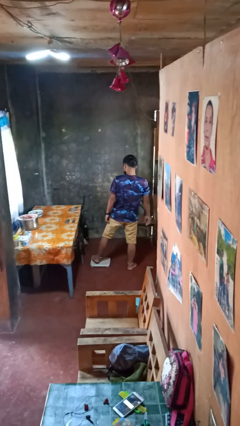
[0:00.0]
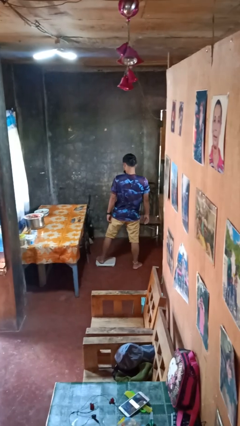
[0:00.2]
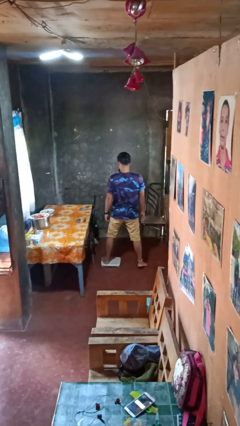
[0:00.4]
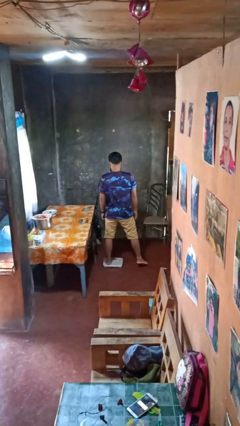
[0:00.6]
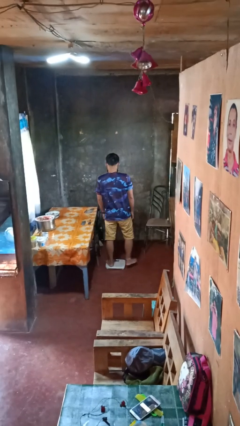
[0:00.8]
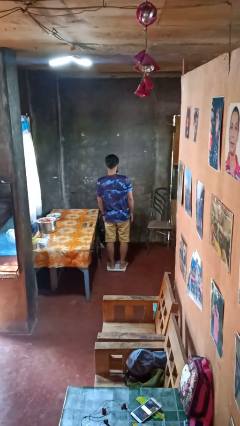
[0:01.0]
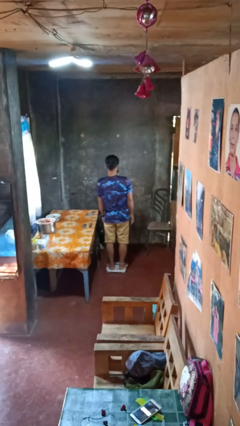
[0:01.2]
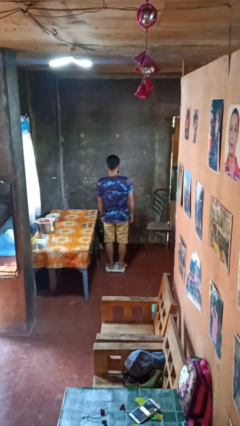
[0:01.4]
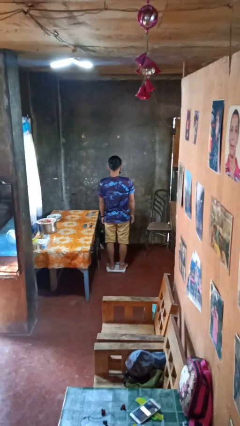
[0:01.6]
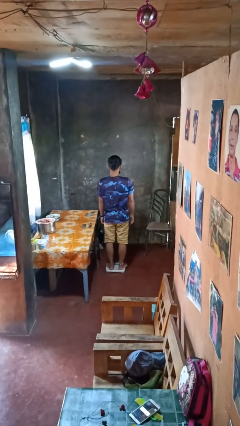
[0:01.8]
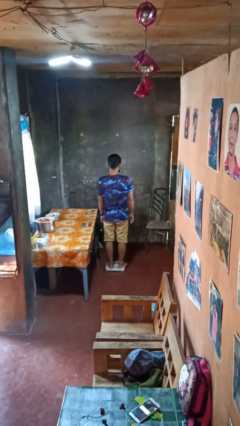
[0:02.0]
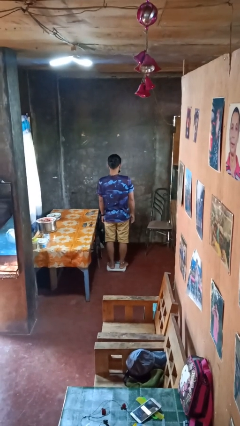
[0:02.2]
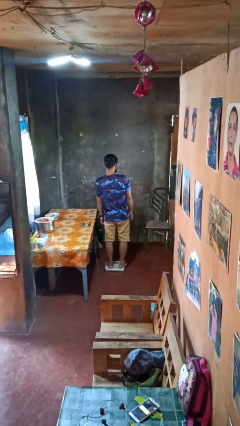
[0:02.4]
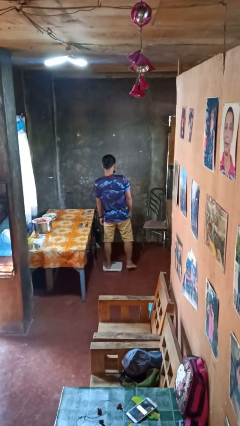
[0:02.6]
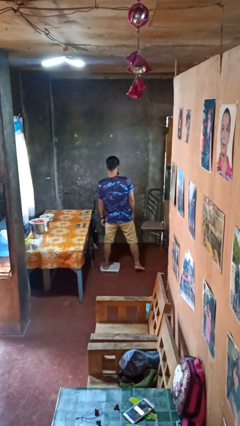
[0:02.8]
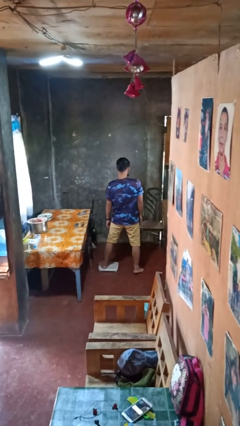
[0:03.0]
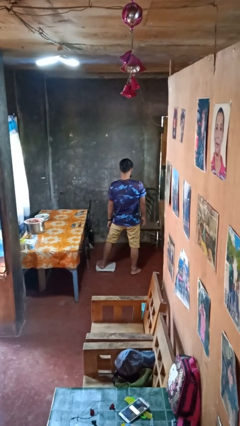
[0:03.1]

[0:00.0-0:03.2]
person uses bodyweight scale

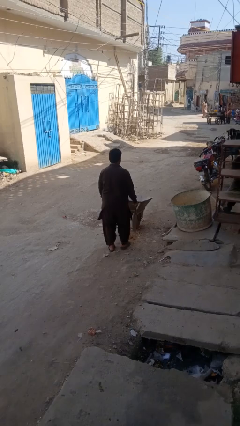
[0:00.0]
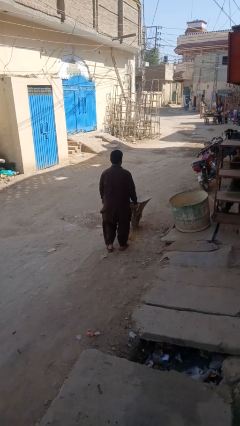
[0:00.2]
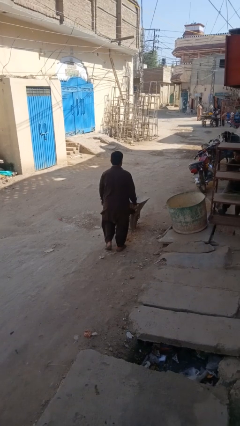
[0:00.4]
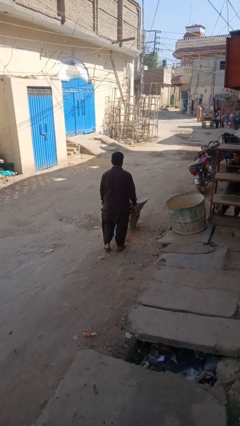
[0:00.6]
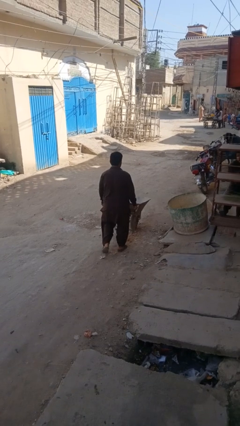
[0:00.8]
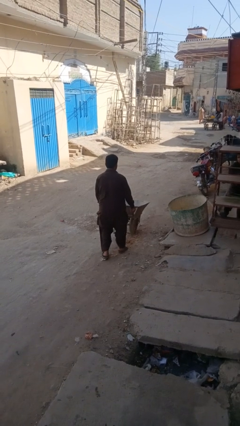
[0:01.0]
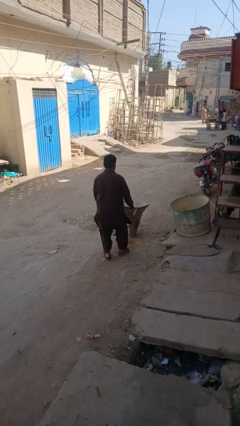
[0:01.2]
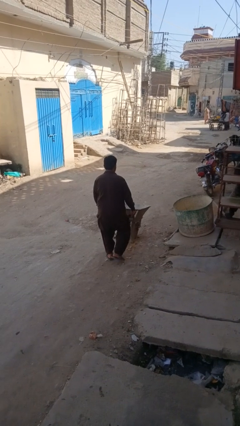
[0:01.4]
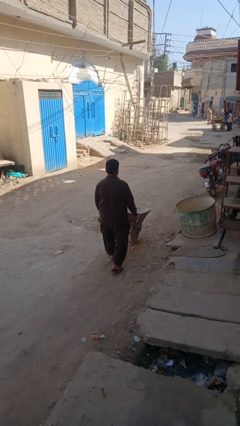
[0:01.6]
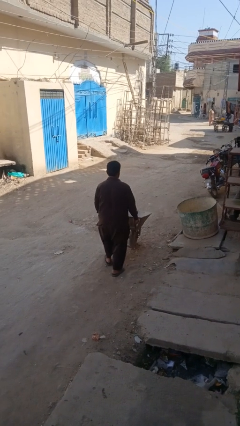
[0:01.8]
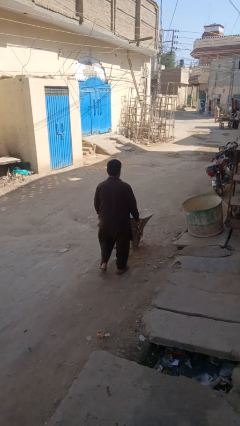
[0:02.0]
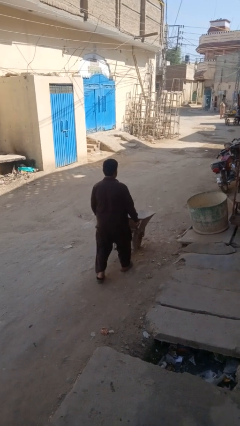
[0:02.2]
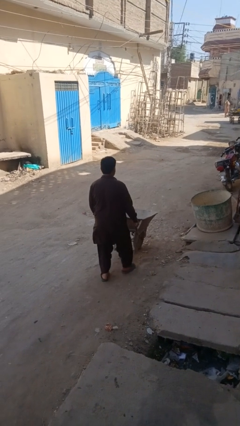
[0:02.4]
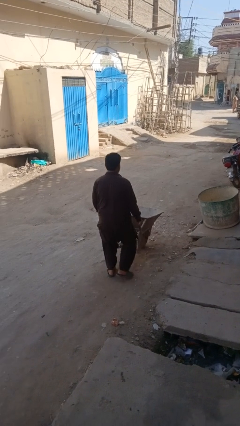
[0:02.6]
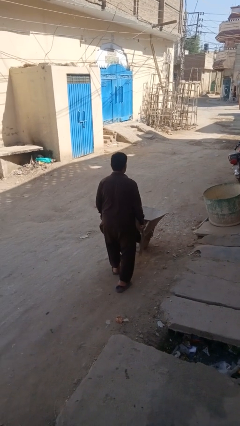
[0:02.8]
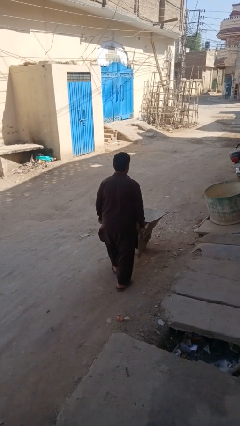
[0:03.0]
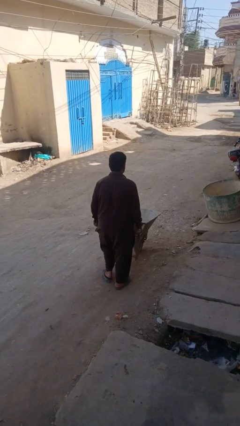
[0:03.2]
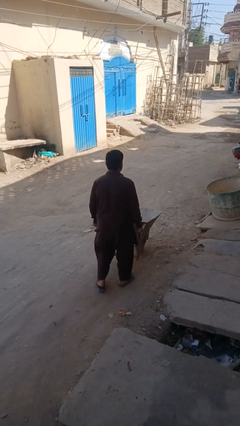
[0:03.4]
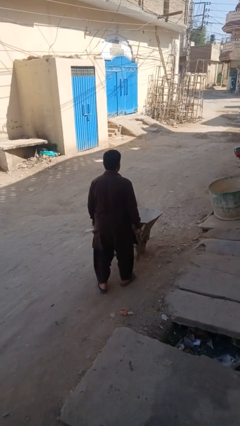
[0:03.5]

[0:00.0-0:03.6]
person pulls wheeled trashcan

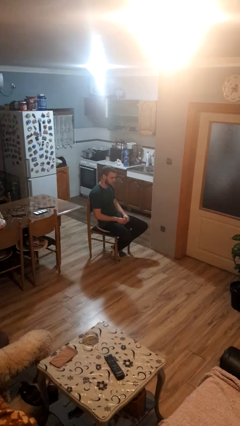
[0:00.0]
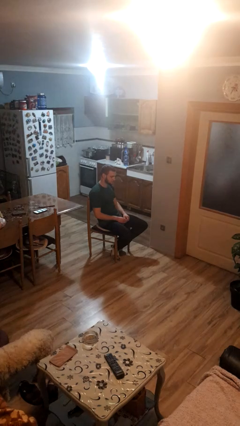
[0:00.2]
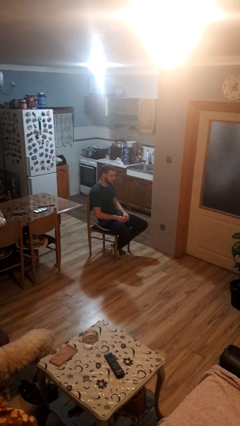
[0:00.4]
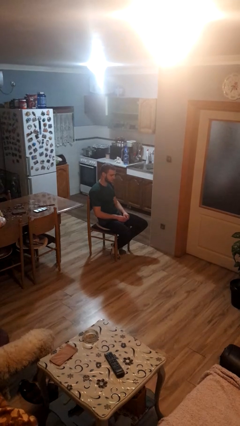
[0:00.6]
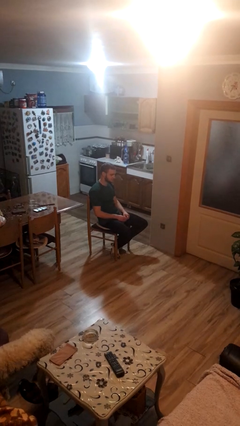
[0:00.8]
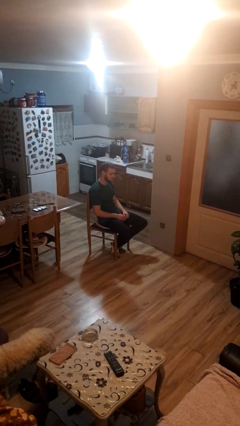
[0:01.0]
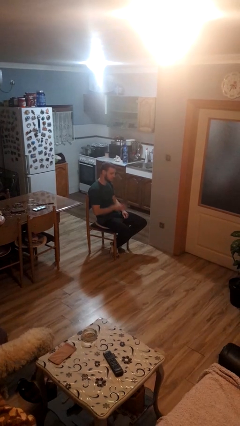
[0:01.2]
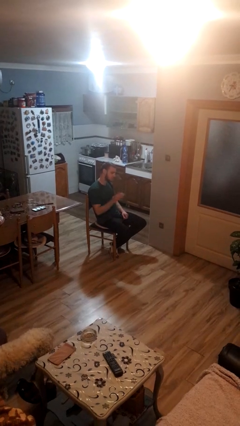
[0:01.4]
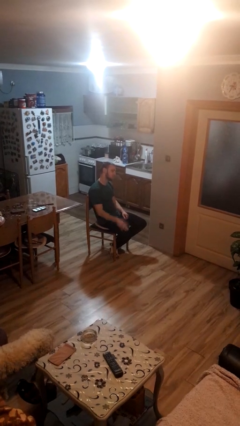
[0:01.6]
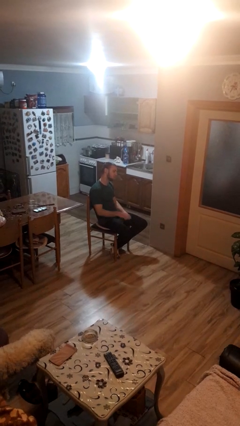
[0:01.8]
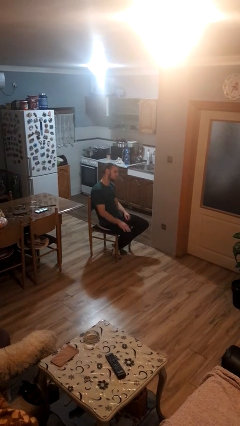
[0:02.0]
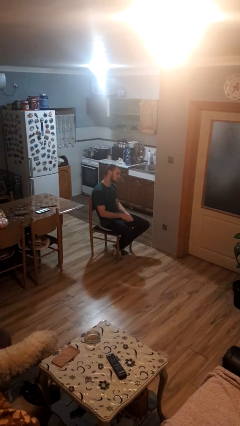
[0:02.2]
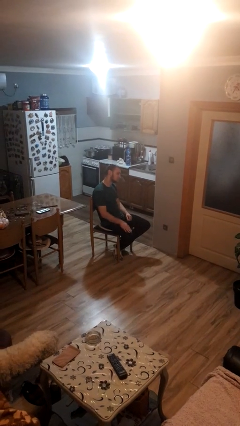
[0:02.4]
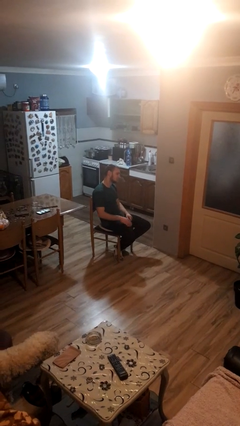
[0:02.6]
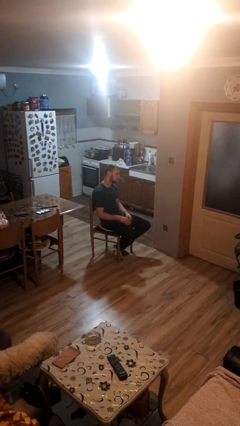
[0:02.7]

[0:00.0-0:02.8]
person slaps hands on thighs

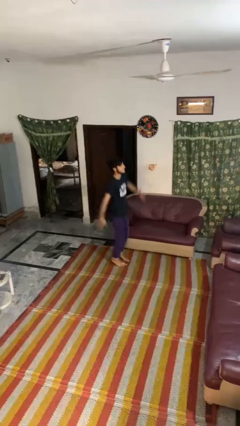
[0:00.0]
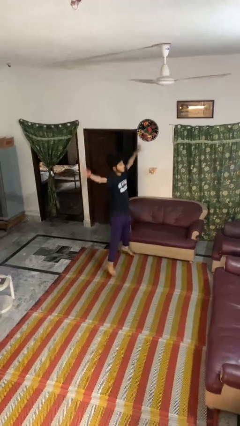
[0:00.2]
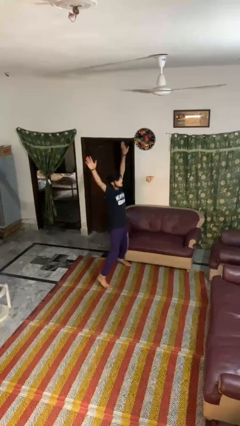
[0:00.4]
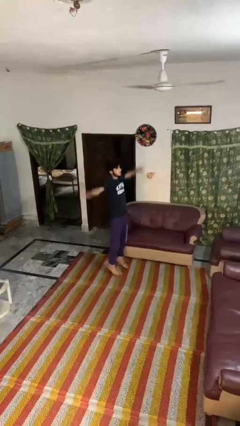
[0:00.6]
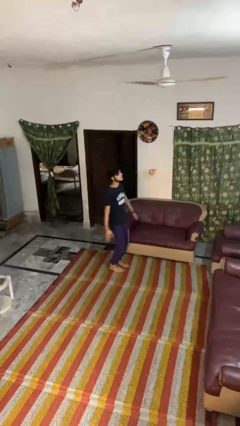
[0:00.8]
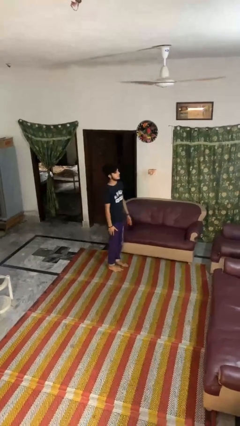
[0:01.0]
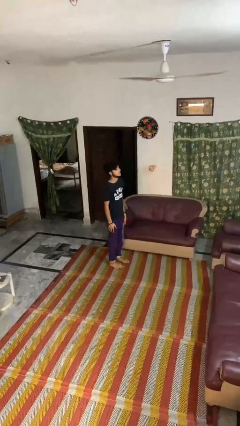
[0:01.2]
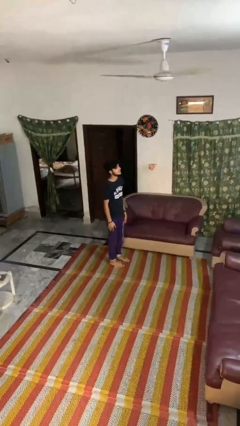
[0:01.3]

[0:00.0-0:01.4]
person exercises with jumping jacks

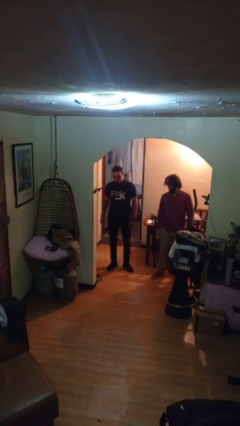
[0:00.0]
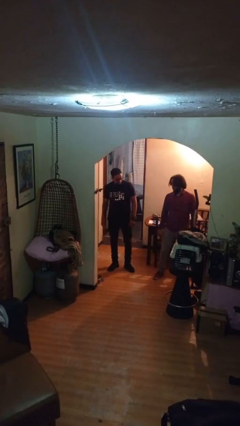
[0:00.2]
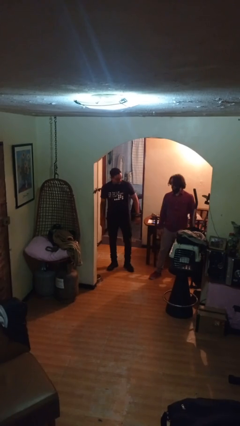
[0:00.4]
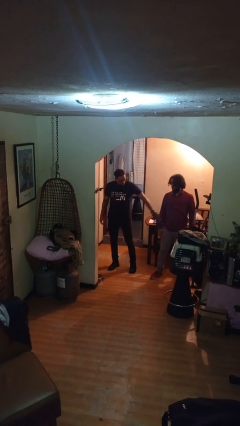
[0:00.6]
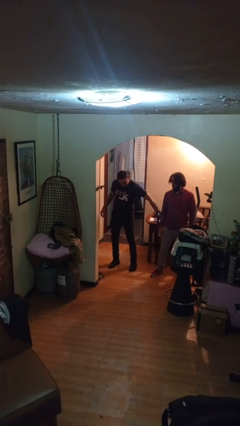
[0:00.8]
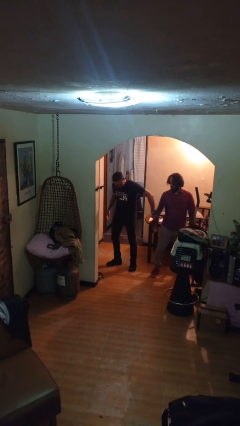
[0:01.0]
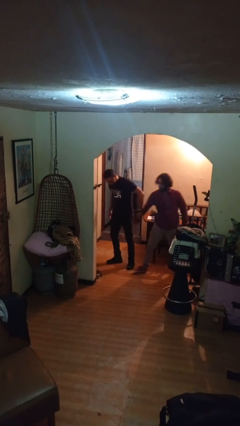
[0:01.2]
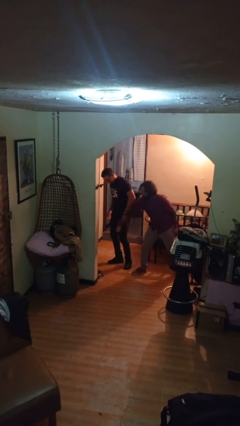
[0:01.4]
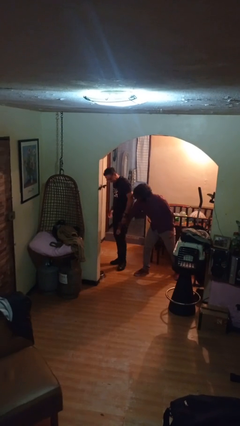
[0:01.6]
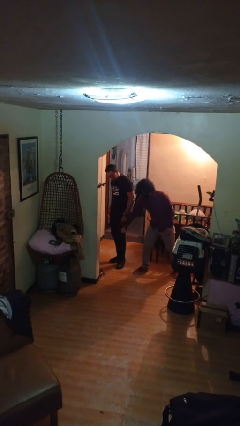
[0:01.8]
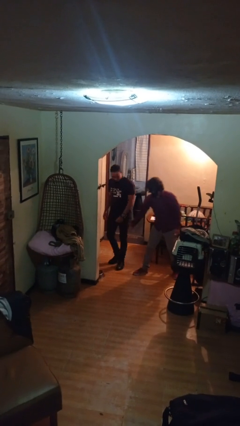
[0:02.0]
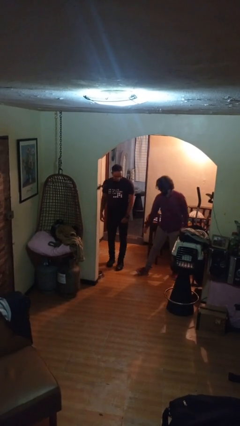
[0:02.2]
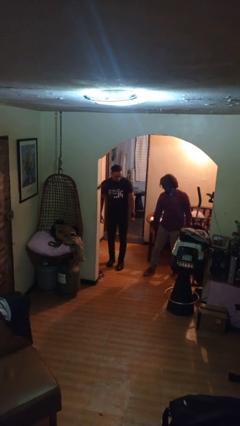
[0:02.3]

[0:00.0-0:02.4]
person grabs person by forearm

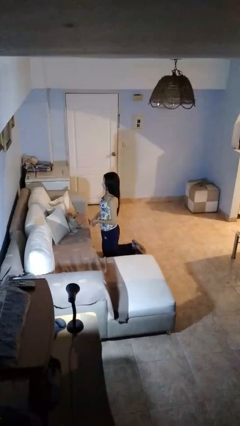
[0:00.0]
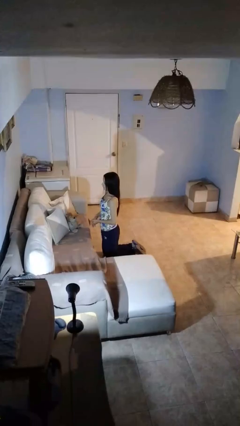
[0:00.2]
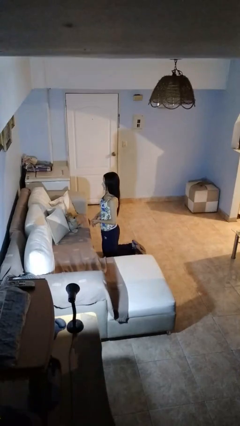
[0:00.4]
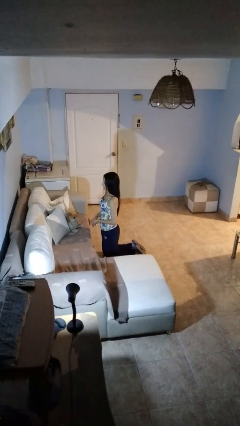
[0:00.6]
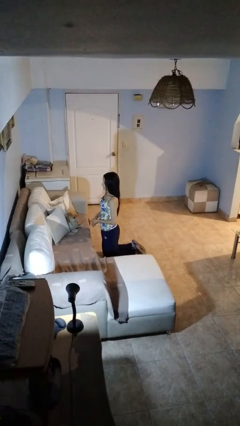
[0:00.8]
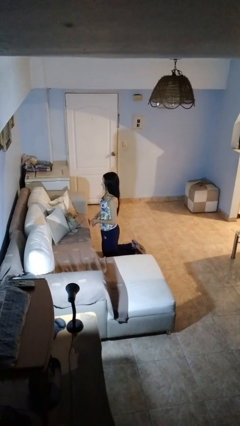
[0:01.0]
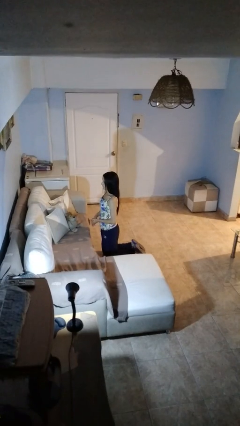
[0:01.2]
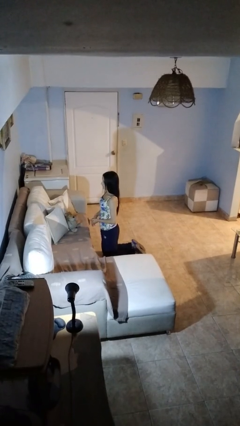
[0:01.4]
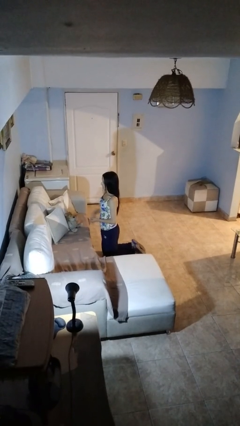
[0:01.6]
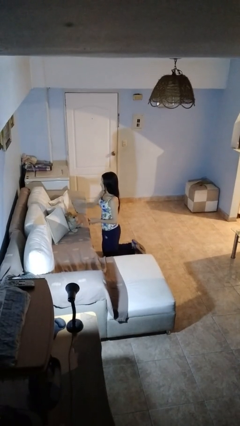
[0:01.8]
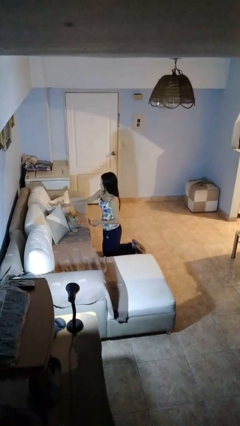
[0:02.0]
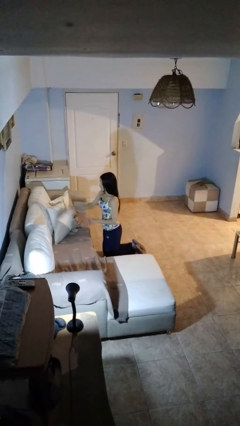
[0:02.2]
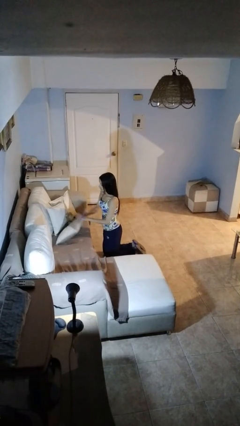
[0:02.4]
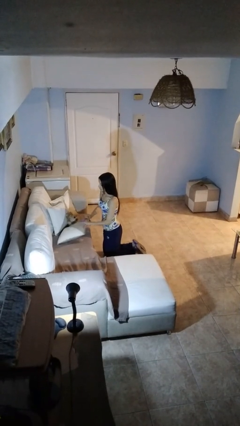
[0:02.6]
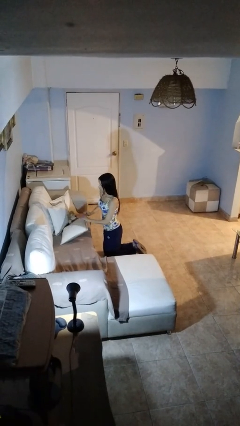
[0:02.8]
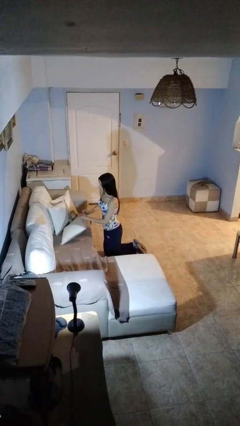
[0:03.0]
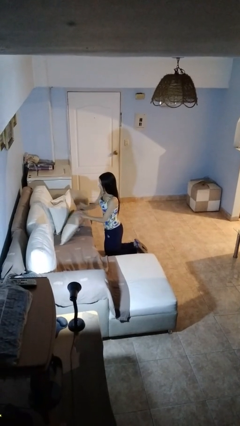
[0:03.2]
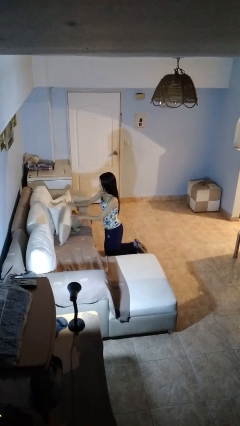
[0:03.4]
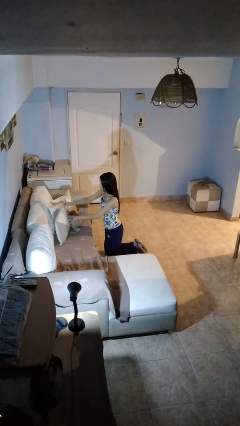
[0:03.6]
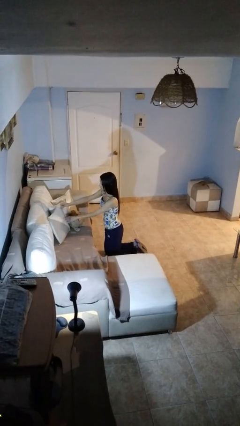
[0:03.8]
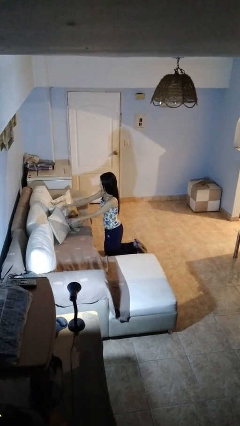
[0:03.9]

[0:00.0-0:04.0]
person searches in couch
